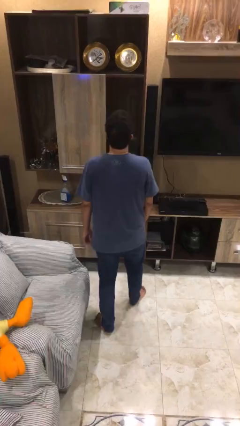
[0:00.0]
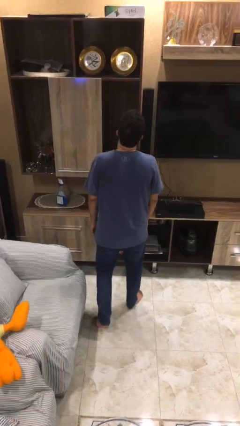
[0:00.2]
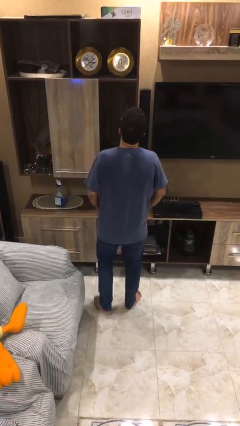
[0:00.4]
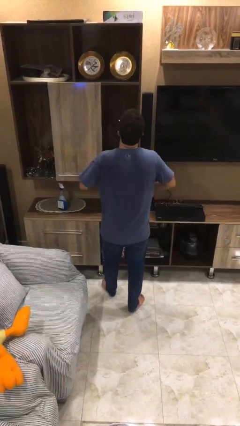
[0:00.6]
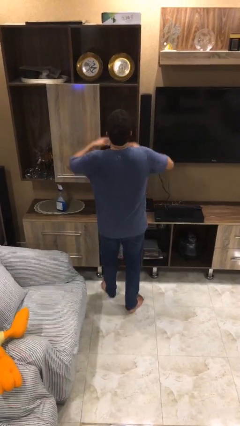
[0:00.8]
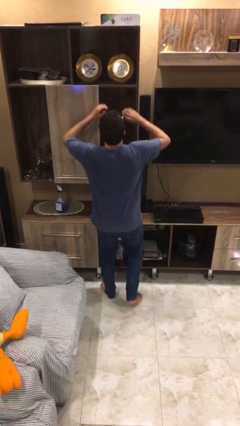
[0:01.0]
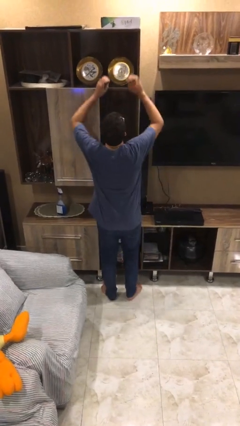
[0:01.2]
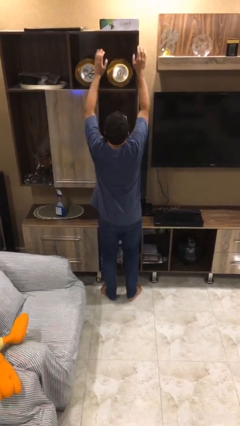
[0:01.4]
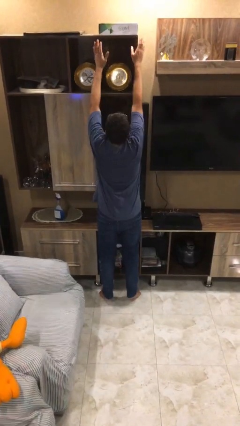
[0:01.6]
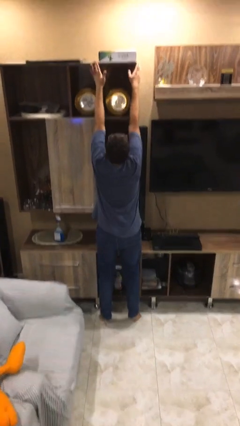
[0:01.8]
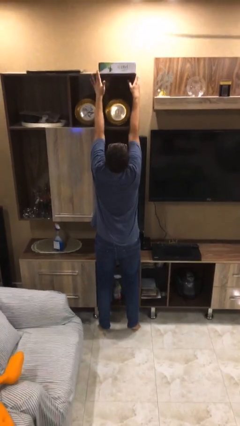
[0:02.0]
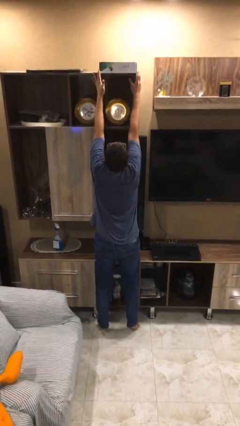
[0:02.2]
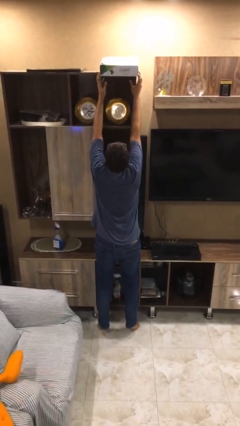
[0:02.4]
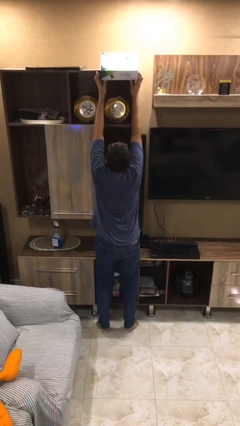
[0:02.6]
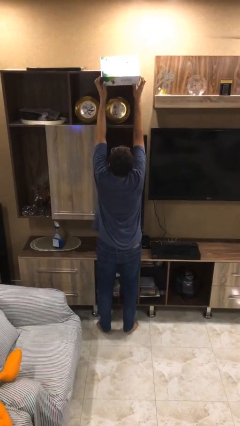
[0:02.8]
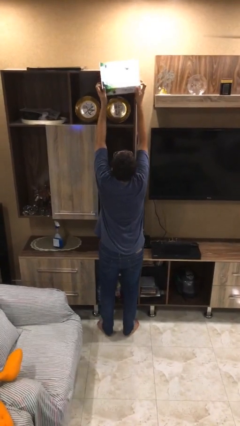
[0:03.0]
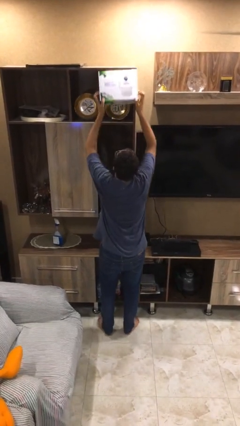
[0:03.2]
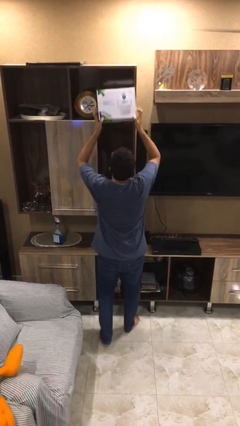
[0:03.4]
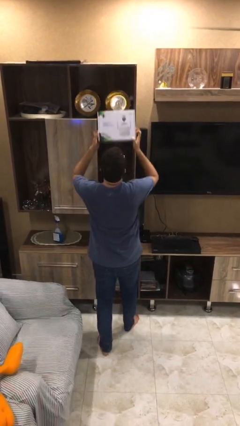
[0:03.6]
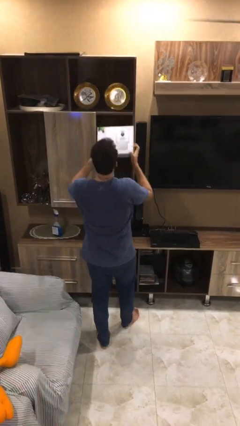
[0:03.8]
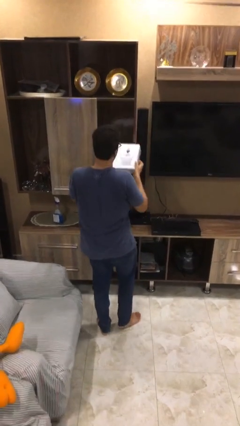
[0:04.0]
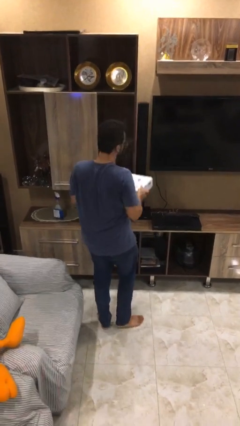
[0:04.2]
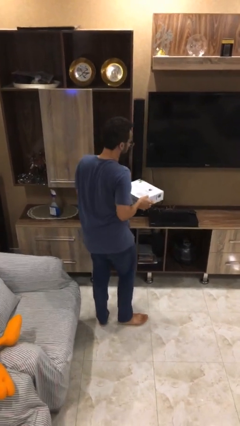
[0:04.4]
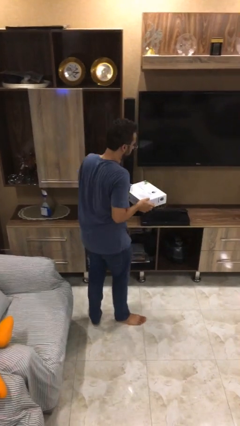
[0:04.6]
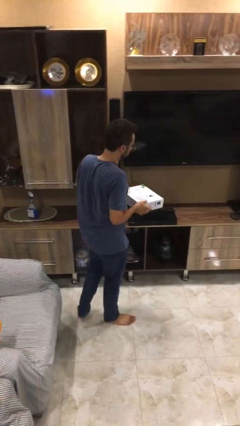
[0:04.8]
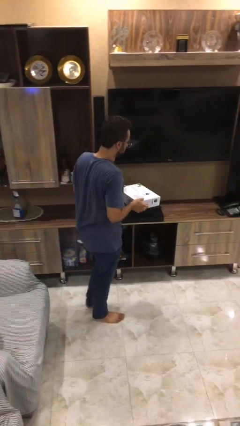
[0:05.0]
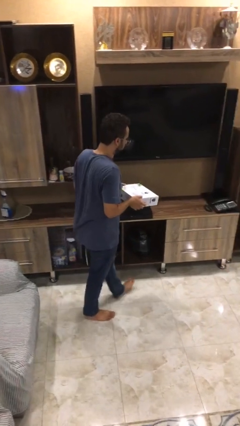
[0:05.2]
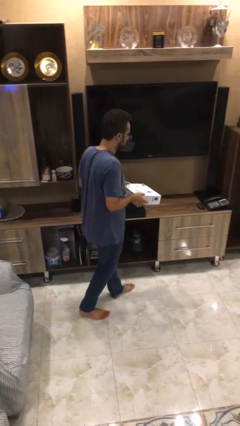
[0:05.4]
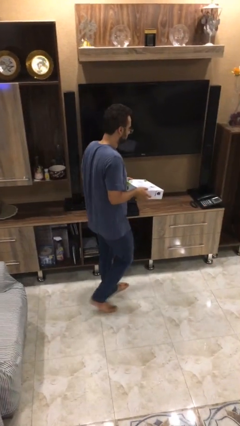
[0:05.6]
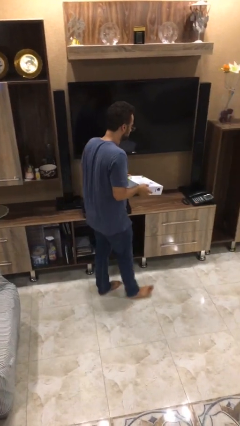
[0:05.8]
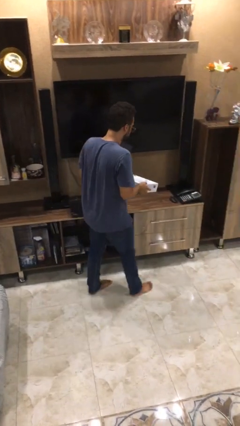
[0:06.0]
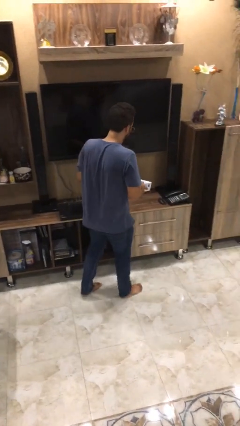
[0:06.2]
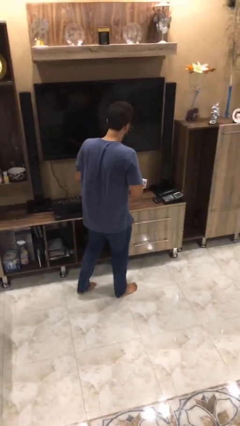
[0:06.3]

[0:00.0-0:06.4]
person picks up object from shelf

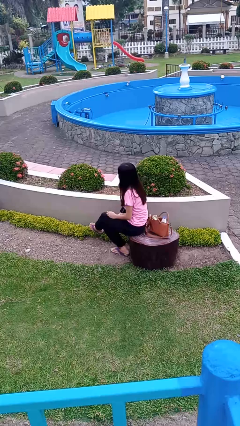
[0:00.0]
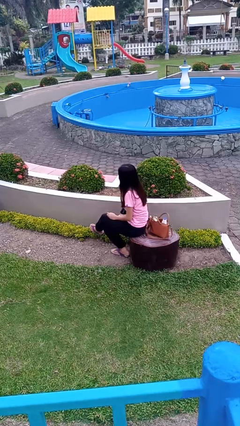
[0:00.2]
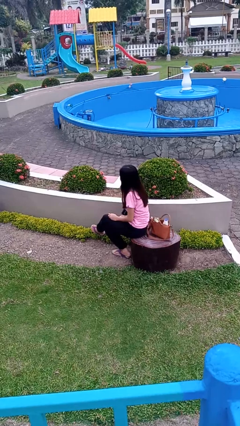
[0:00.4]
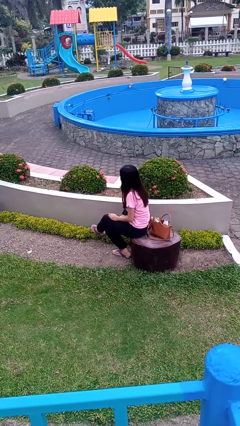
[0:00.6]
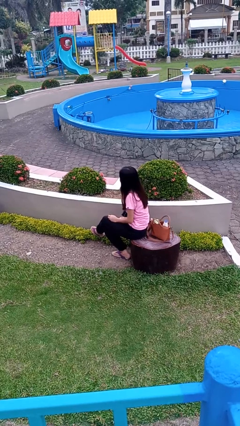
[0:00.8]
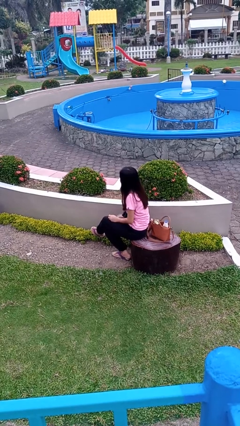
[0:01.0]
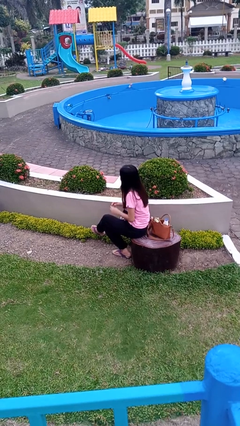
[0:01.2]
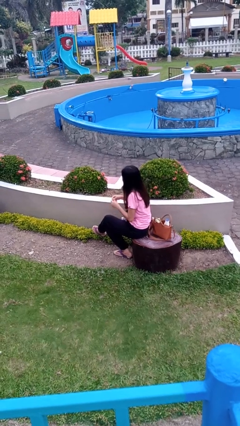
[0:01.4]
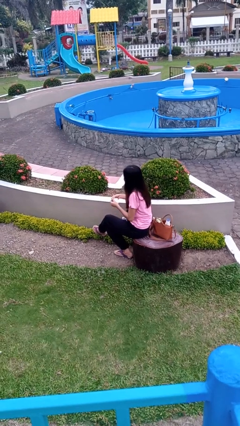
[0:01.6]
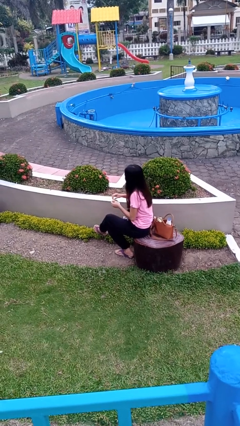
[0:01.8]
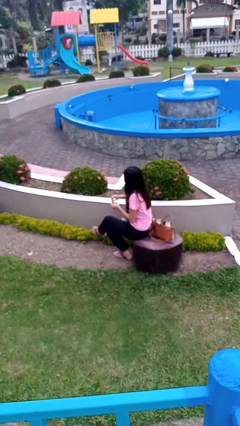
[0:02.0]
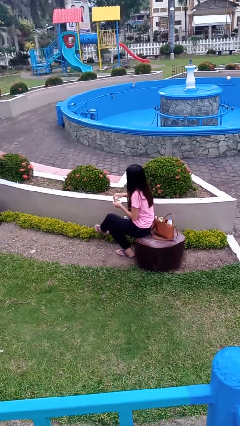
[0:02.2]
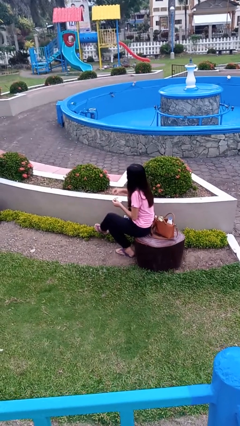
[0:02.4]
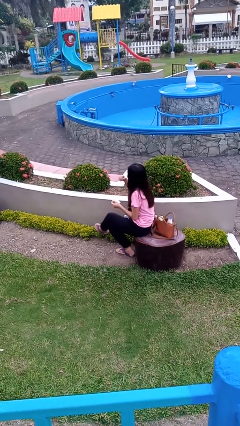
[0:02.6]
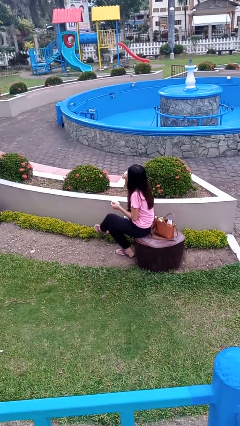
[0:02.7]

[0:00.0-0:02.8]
person takes medicine pills

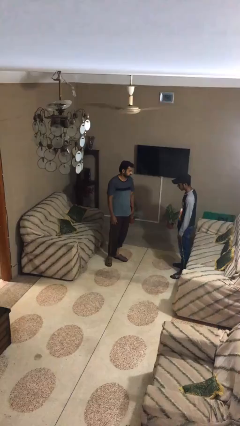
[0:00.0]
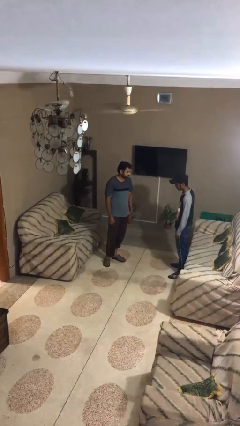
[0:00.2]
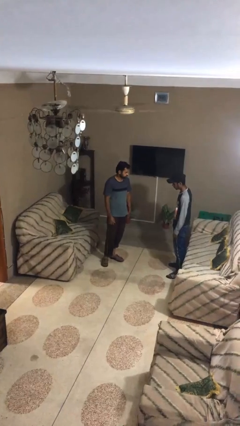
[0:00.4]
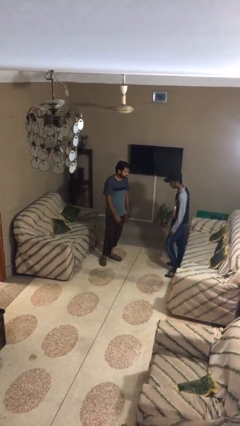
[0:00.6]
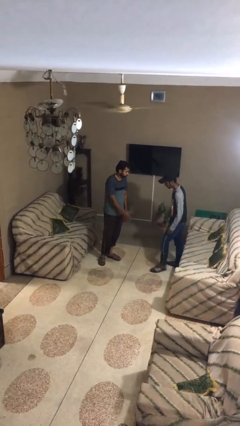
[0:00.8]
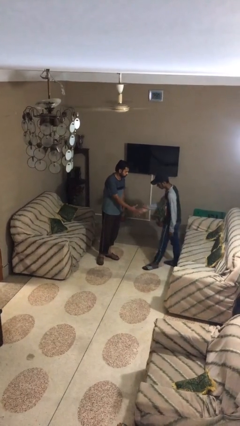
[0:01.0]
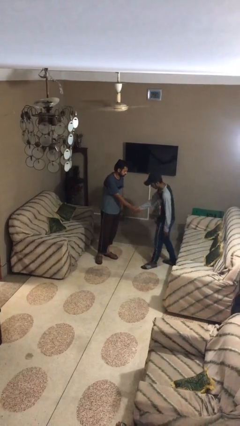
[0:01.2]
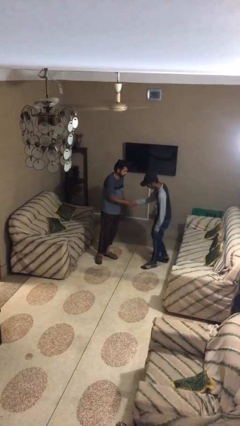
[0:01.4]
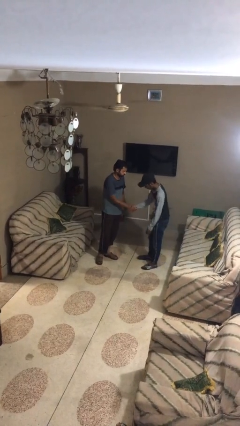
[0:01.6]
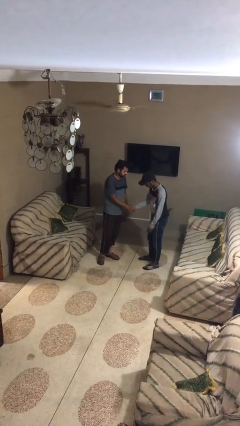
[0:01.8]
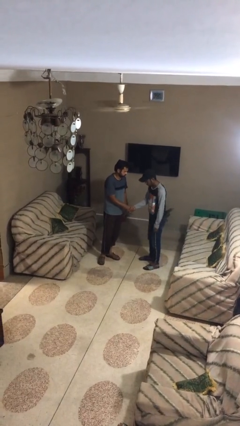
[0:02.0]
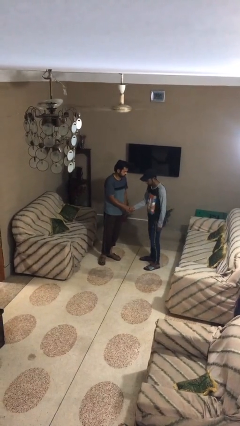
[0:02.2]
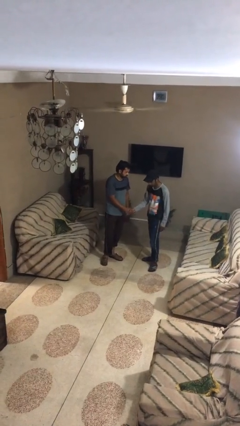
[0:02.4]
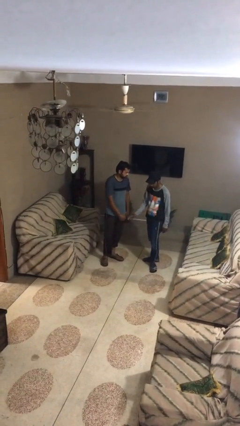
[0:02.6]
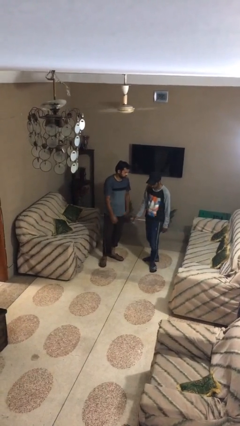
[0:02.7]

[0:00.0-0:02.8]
person shakes hand

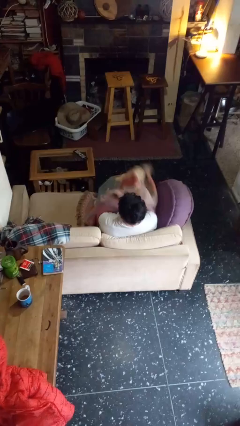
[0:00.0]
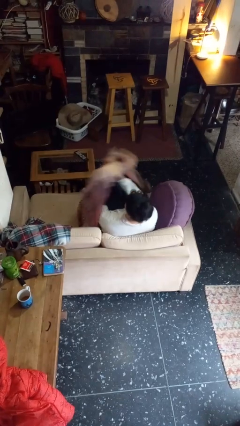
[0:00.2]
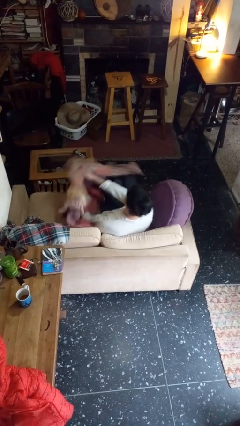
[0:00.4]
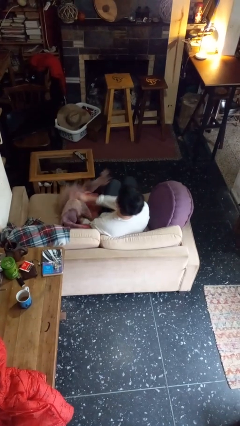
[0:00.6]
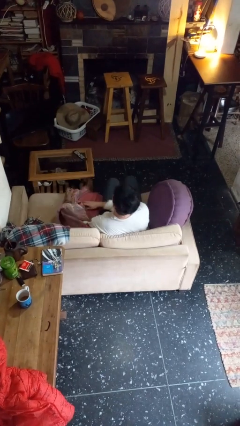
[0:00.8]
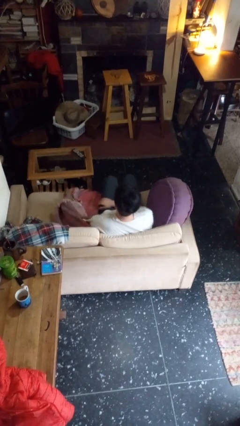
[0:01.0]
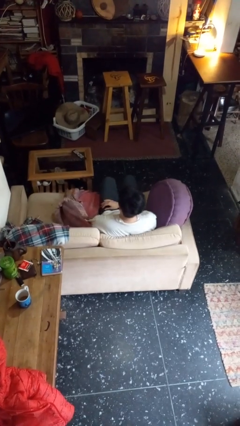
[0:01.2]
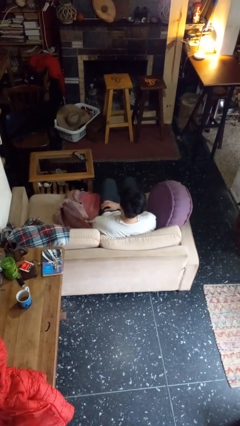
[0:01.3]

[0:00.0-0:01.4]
person uncovers with blanket

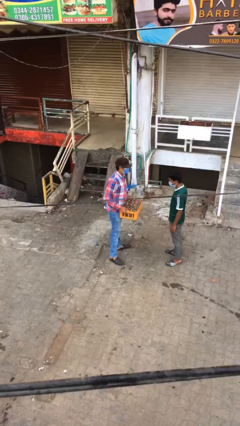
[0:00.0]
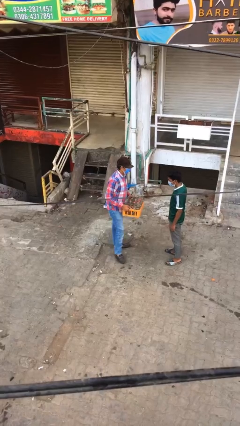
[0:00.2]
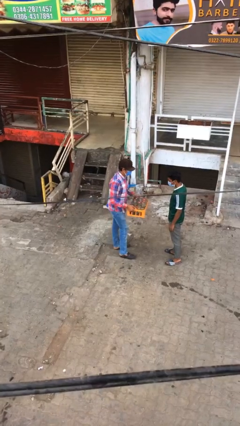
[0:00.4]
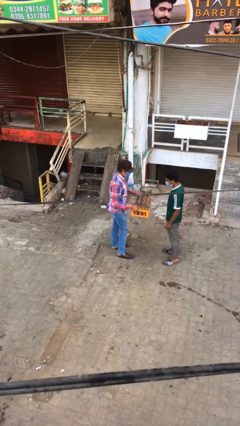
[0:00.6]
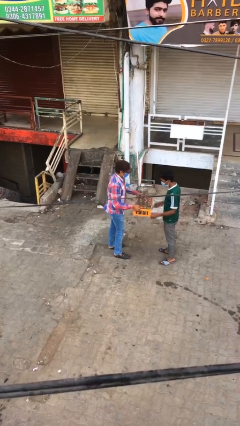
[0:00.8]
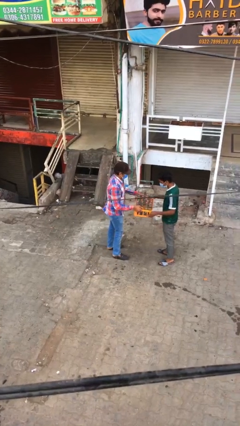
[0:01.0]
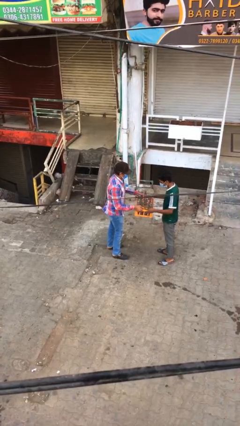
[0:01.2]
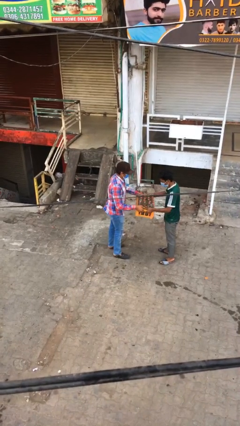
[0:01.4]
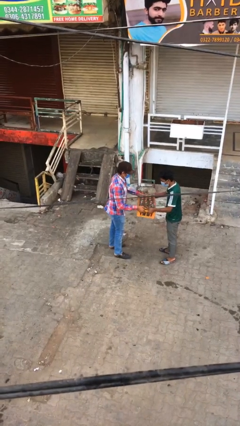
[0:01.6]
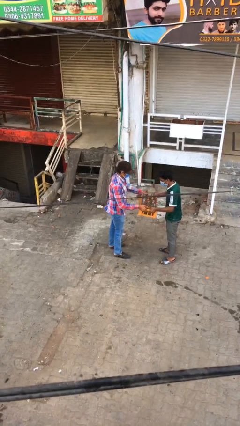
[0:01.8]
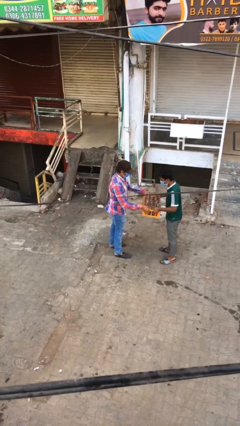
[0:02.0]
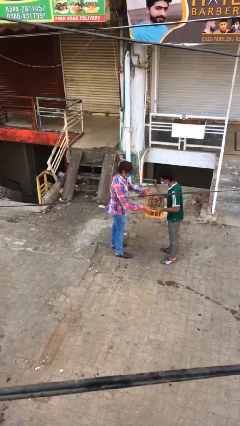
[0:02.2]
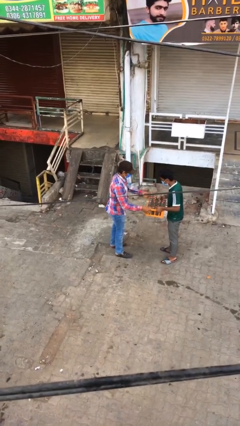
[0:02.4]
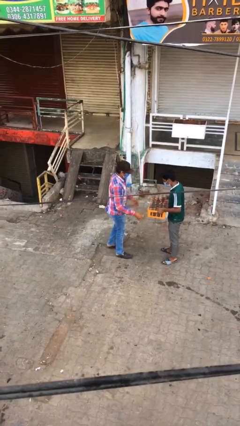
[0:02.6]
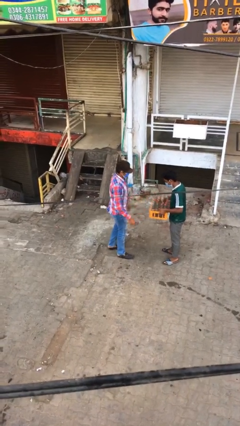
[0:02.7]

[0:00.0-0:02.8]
person transfers object to person

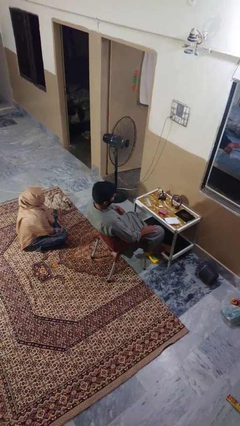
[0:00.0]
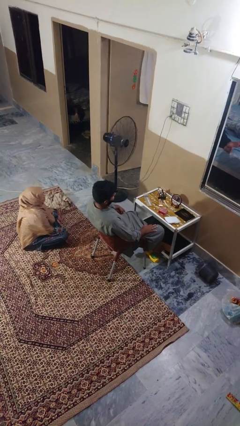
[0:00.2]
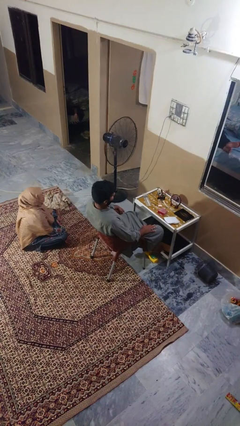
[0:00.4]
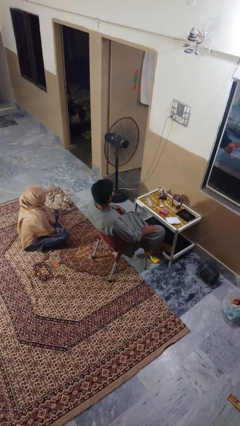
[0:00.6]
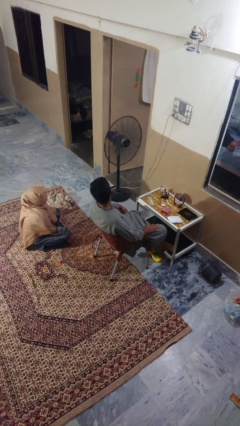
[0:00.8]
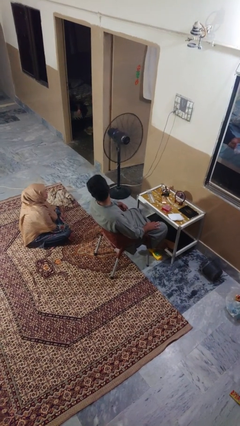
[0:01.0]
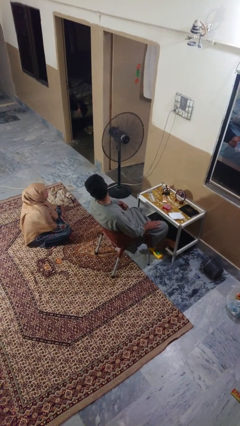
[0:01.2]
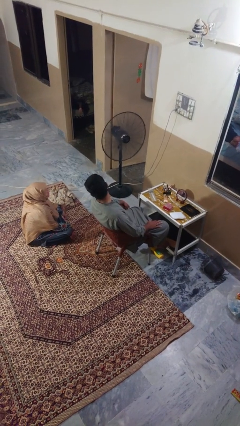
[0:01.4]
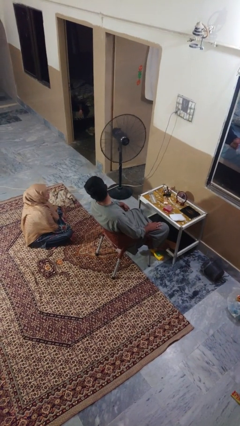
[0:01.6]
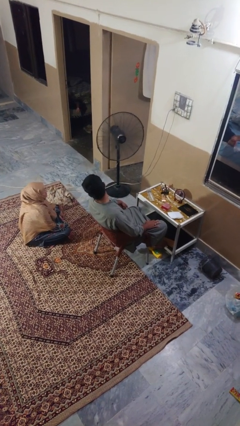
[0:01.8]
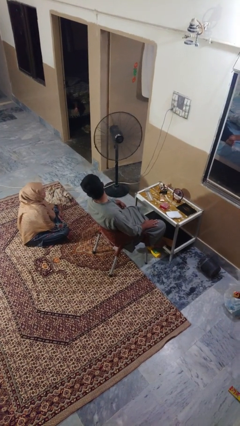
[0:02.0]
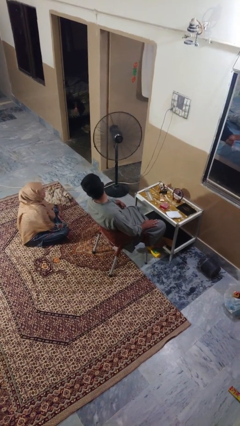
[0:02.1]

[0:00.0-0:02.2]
person looks over shoulder
